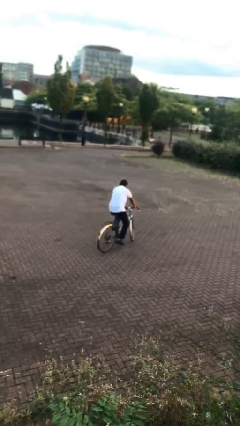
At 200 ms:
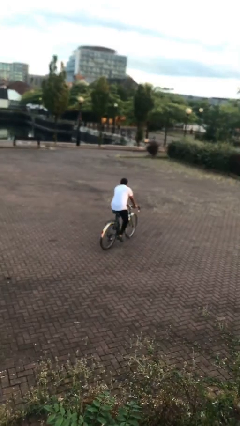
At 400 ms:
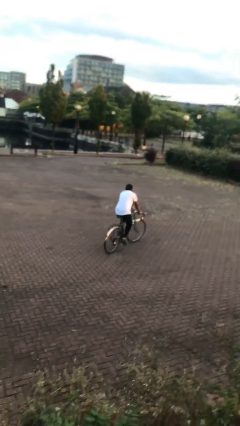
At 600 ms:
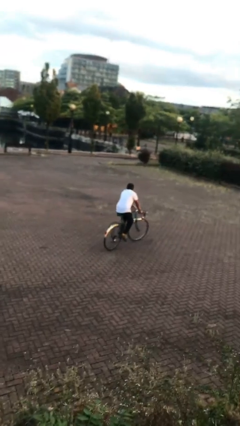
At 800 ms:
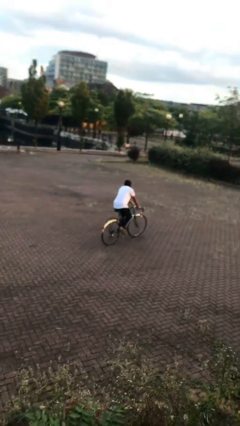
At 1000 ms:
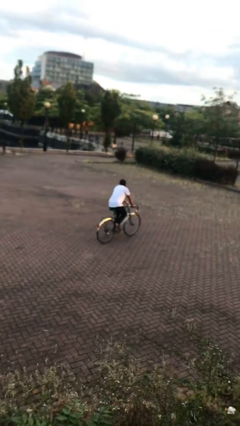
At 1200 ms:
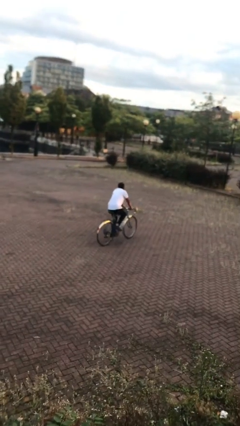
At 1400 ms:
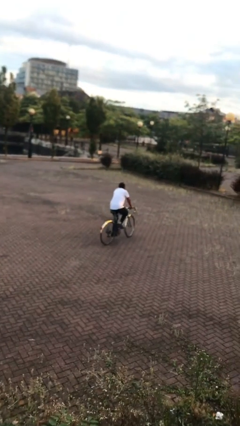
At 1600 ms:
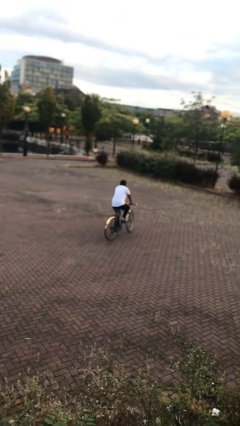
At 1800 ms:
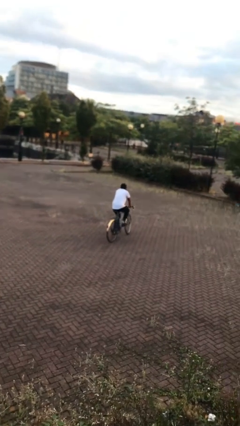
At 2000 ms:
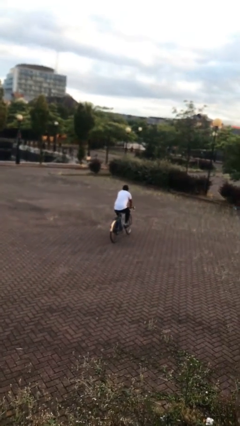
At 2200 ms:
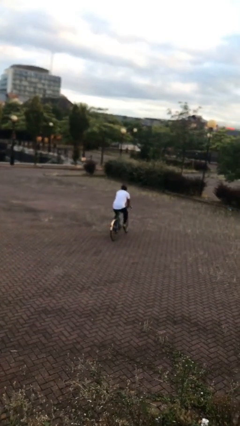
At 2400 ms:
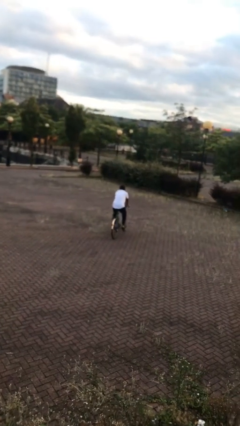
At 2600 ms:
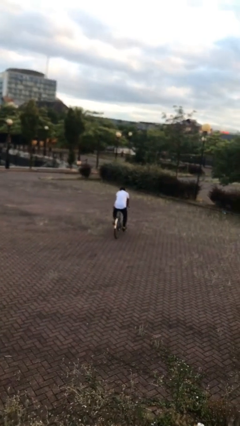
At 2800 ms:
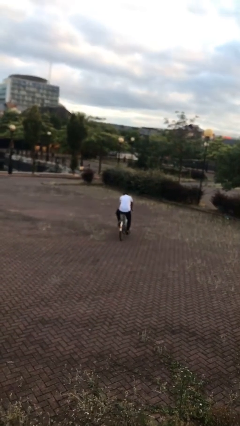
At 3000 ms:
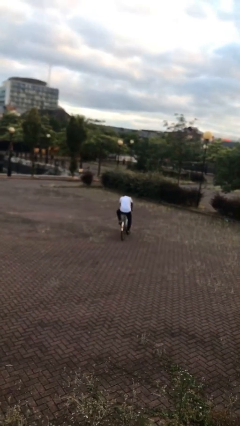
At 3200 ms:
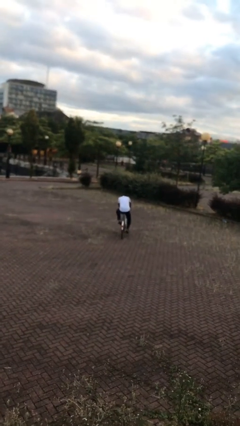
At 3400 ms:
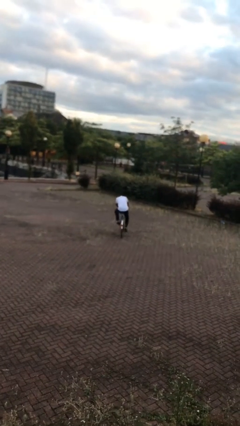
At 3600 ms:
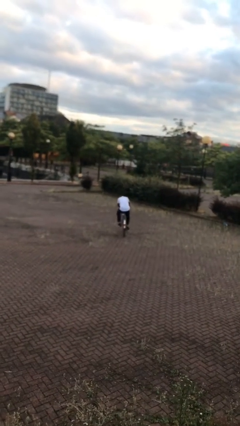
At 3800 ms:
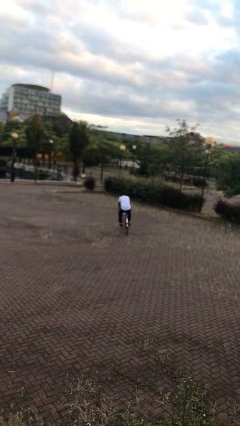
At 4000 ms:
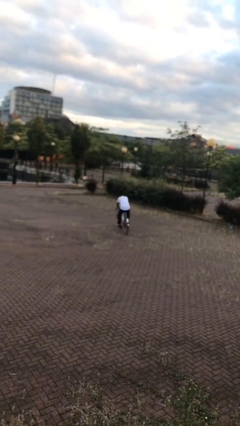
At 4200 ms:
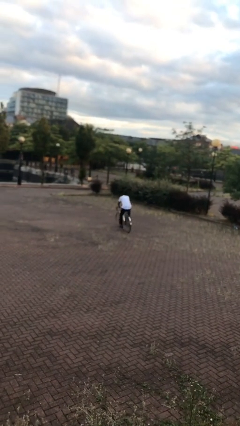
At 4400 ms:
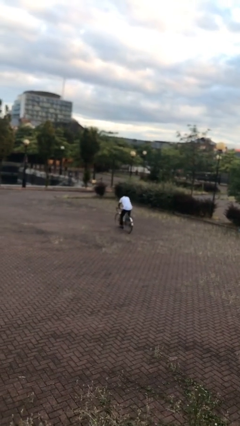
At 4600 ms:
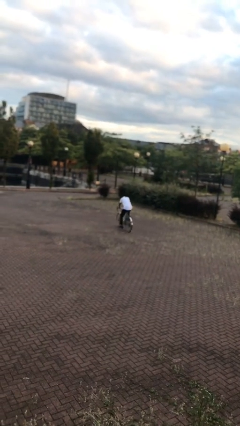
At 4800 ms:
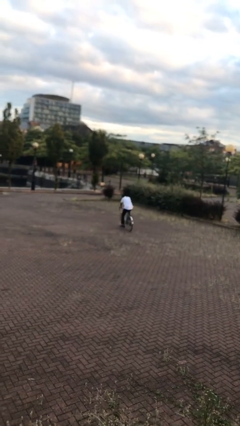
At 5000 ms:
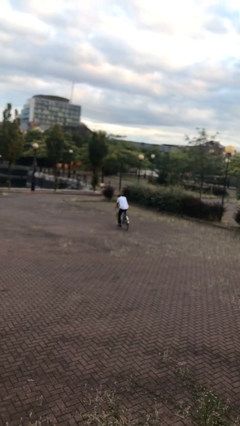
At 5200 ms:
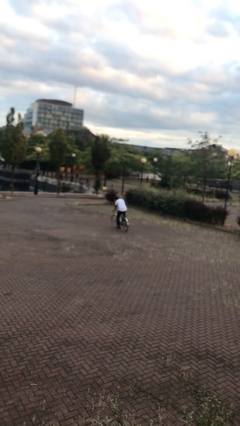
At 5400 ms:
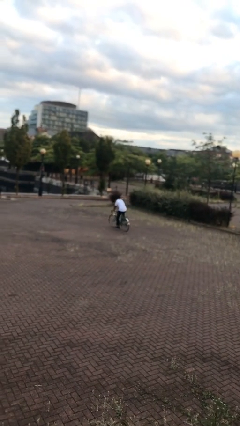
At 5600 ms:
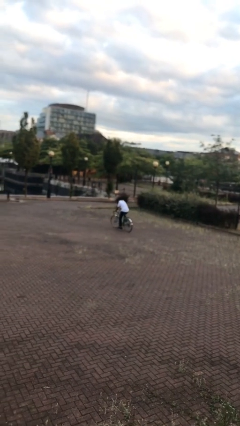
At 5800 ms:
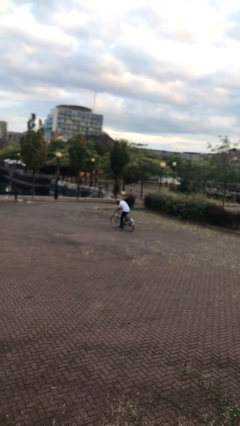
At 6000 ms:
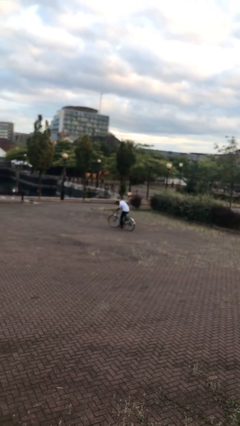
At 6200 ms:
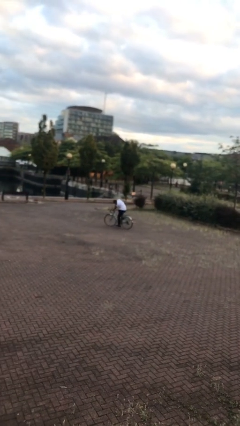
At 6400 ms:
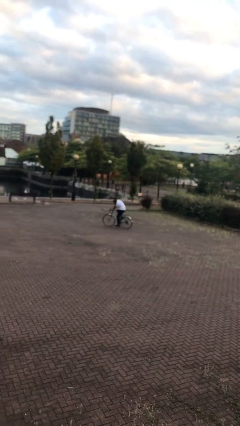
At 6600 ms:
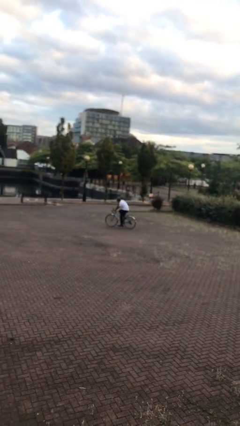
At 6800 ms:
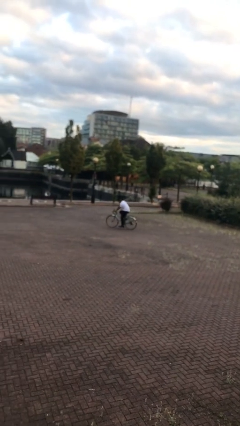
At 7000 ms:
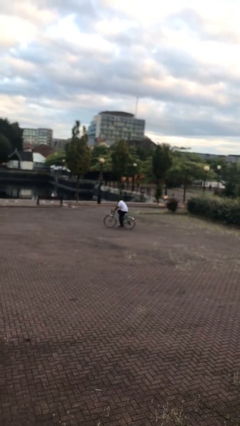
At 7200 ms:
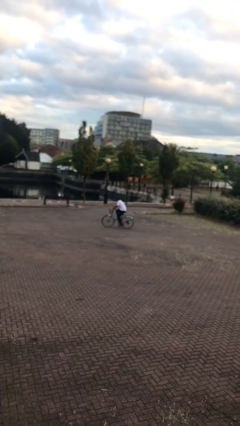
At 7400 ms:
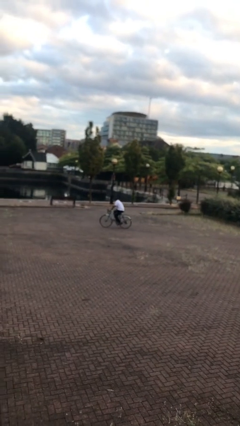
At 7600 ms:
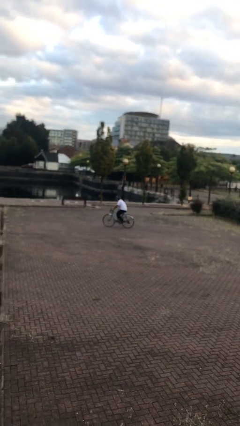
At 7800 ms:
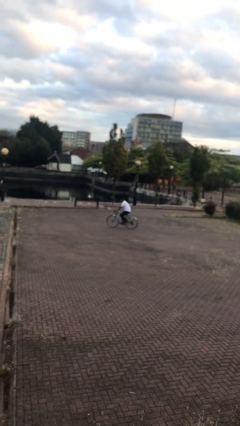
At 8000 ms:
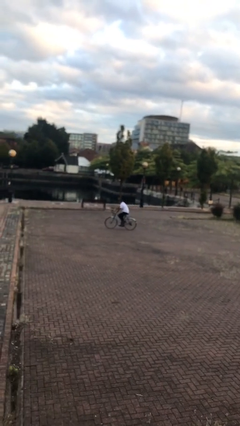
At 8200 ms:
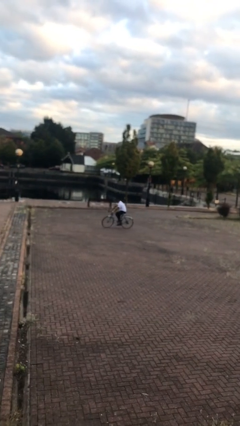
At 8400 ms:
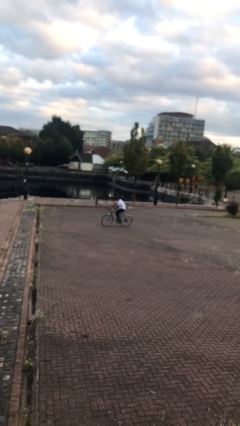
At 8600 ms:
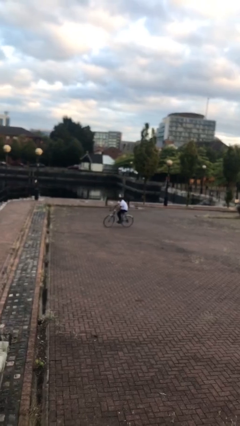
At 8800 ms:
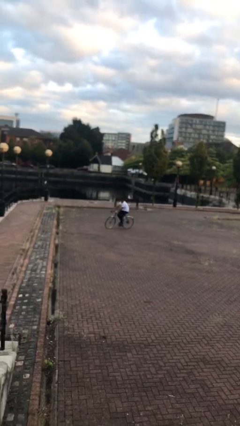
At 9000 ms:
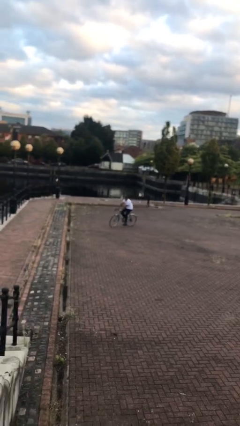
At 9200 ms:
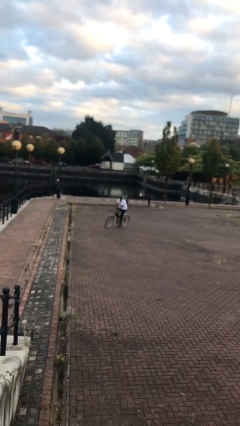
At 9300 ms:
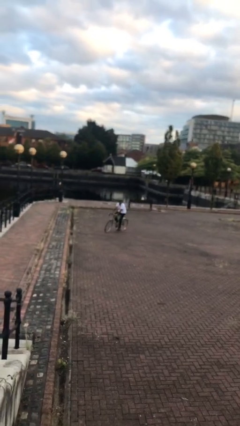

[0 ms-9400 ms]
person rides bicycle

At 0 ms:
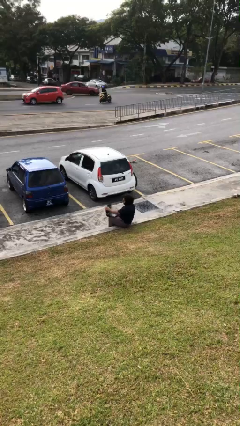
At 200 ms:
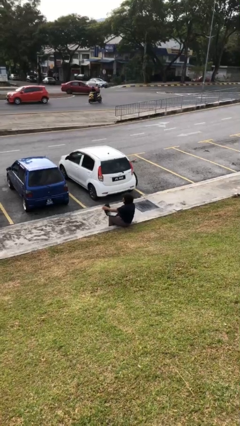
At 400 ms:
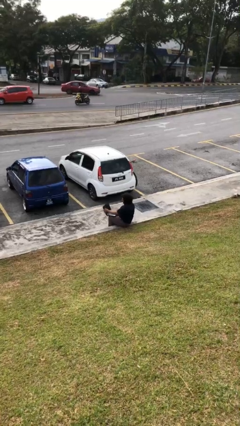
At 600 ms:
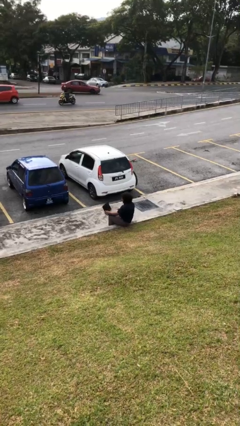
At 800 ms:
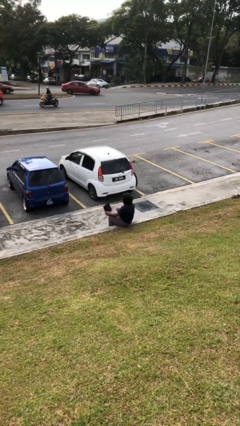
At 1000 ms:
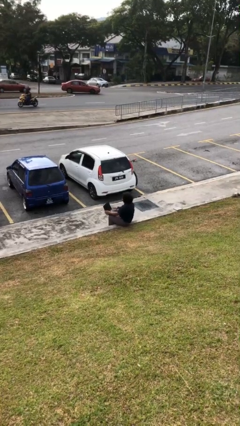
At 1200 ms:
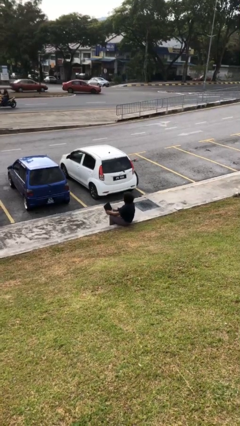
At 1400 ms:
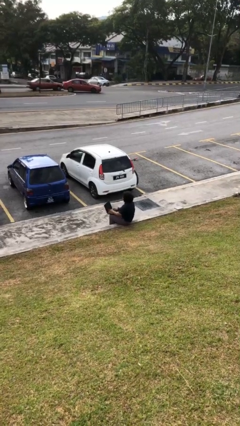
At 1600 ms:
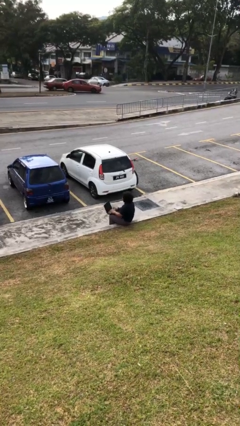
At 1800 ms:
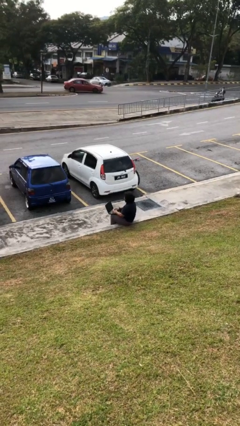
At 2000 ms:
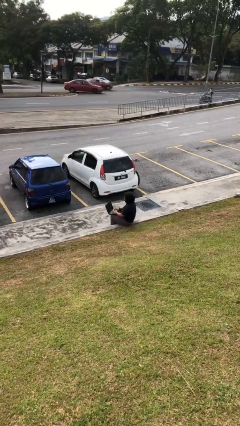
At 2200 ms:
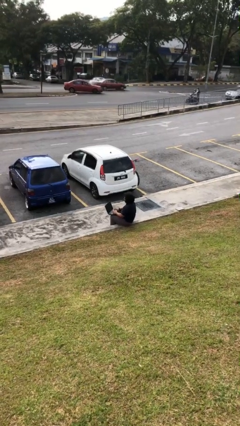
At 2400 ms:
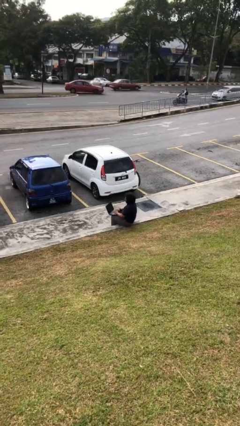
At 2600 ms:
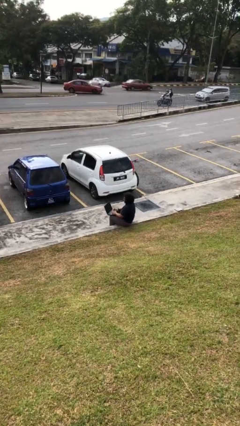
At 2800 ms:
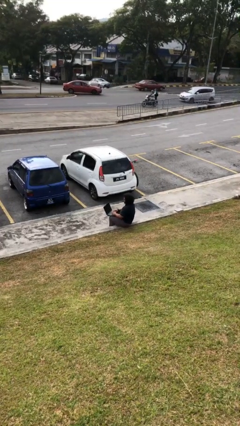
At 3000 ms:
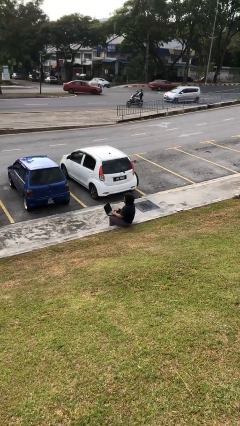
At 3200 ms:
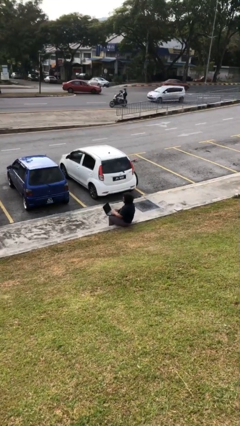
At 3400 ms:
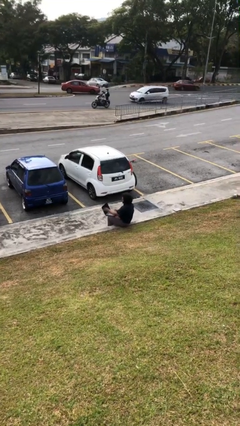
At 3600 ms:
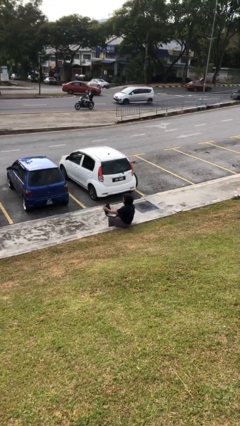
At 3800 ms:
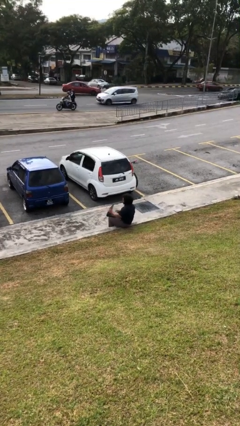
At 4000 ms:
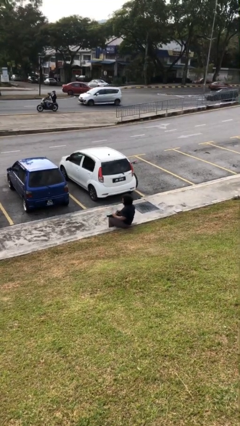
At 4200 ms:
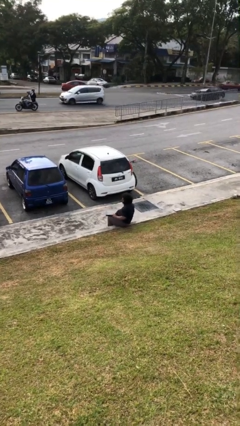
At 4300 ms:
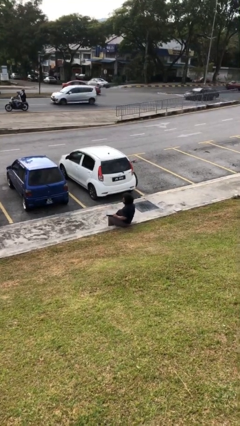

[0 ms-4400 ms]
person interacts with laptop

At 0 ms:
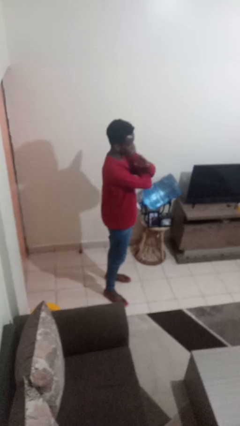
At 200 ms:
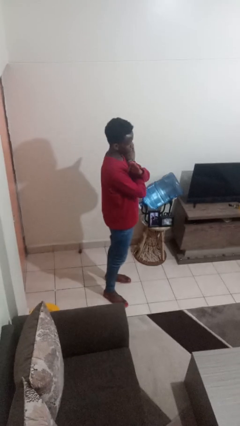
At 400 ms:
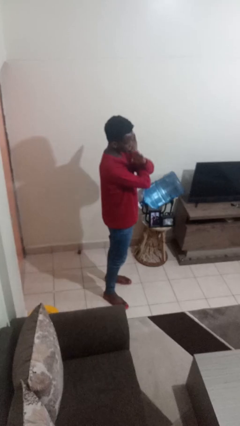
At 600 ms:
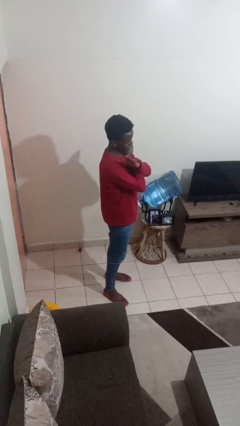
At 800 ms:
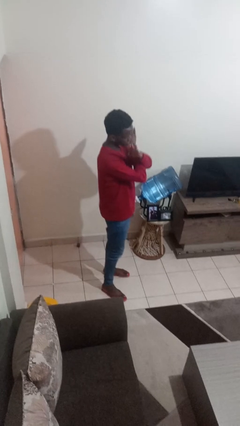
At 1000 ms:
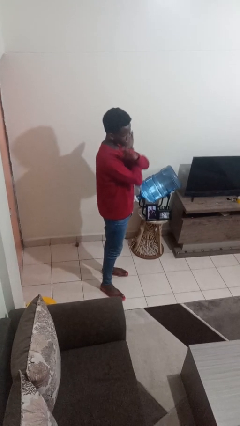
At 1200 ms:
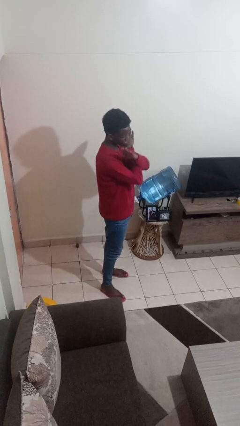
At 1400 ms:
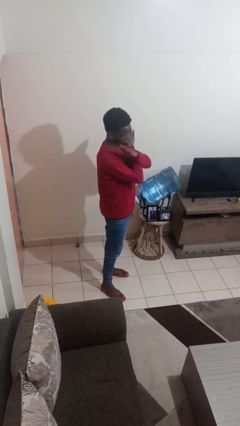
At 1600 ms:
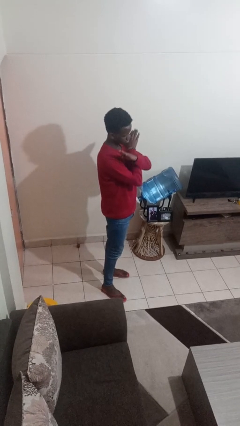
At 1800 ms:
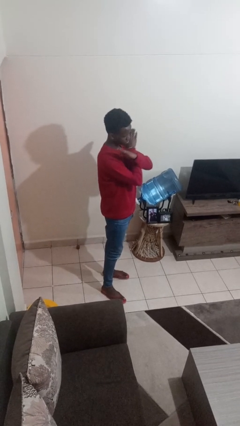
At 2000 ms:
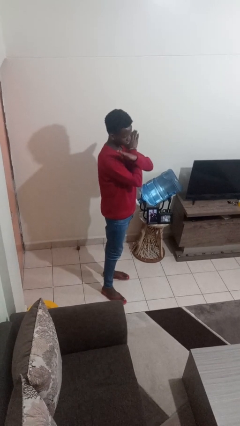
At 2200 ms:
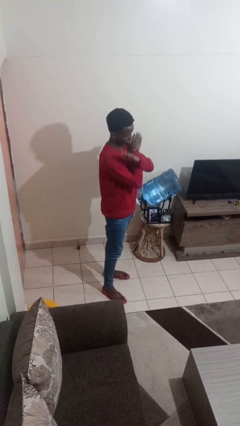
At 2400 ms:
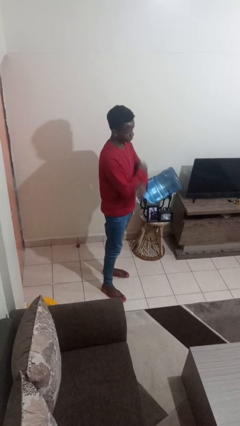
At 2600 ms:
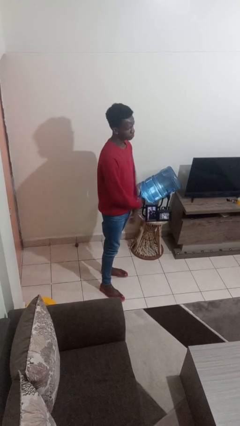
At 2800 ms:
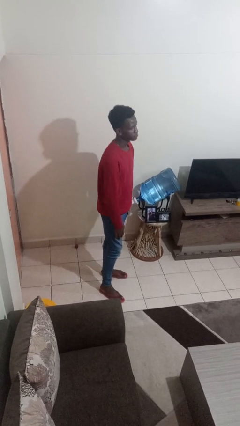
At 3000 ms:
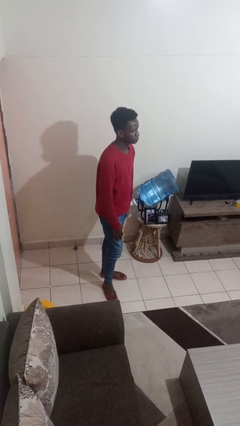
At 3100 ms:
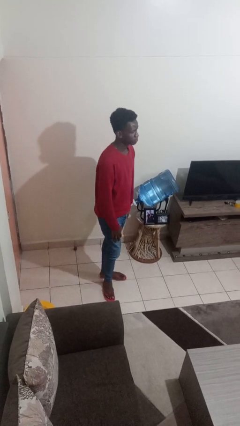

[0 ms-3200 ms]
person gestures arms x

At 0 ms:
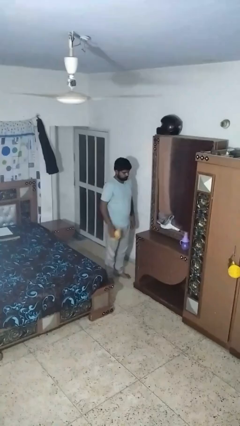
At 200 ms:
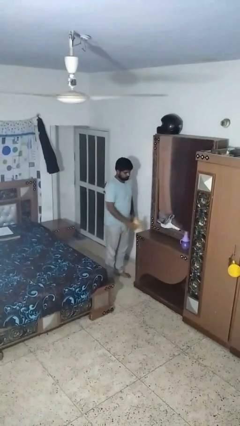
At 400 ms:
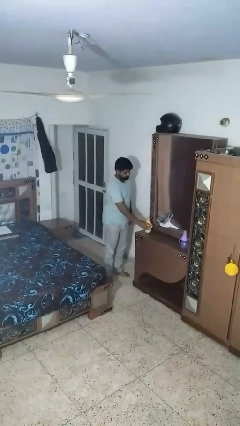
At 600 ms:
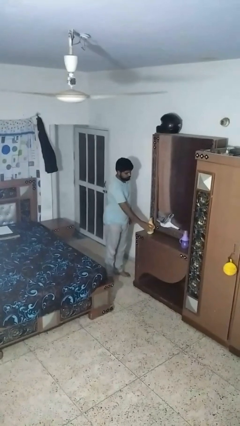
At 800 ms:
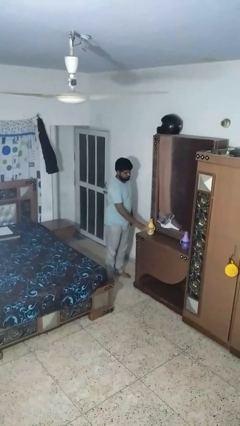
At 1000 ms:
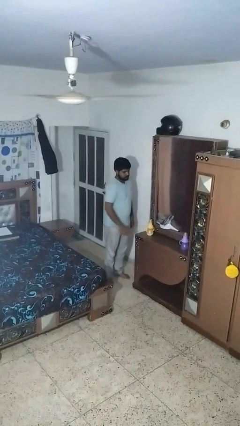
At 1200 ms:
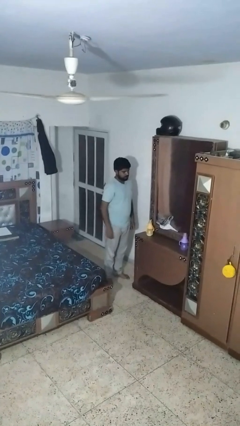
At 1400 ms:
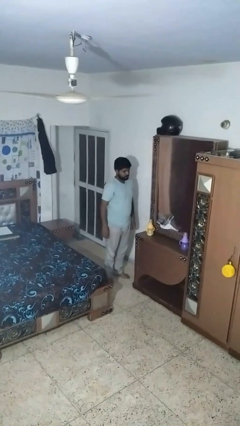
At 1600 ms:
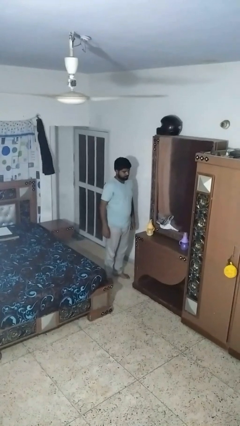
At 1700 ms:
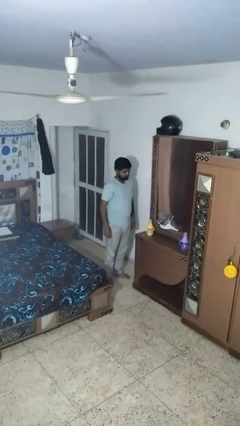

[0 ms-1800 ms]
person puts down object on countertop
